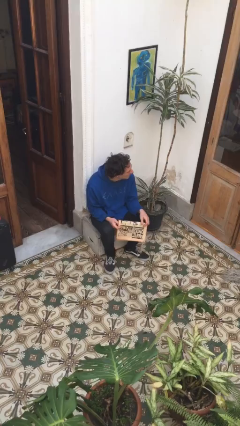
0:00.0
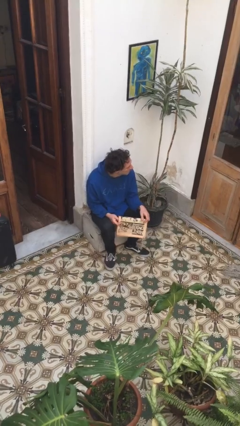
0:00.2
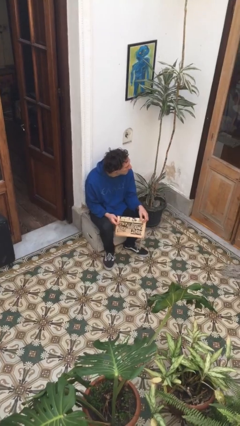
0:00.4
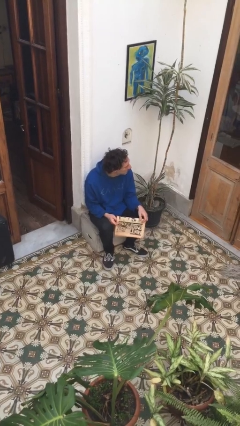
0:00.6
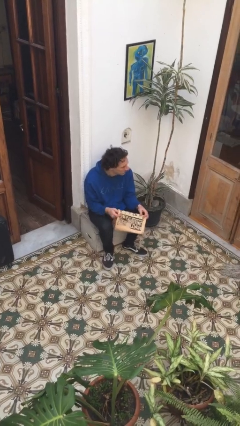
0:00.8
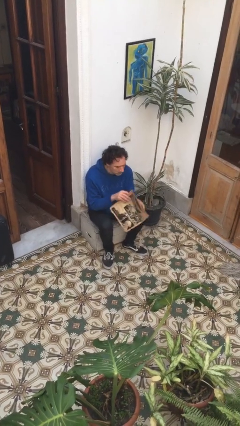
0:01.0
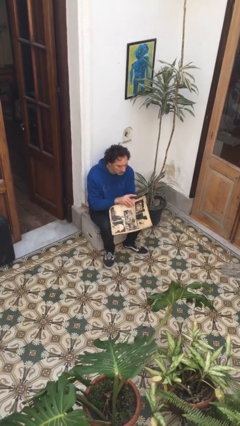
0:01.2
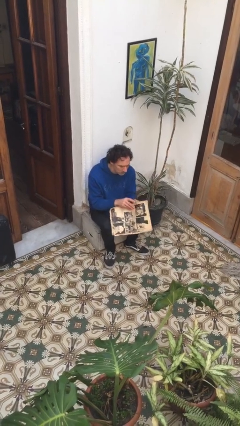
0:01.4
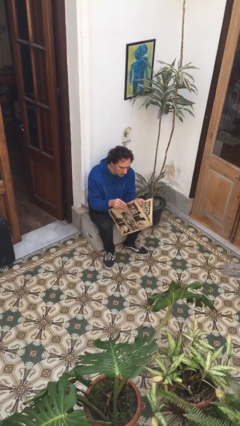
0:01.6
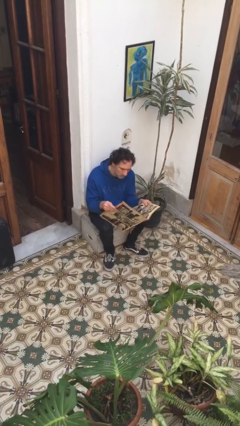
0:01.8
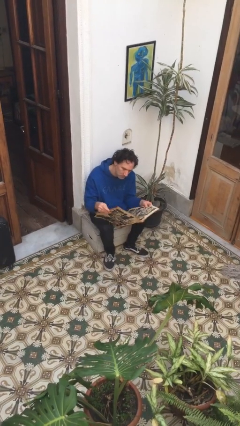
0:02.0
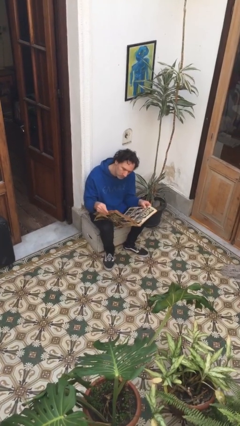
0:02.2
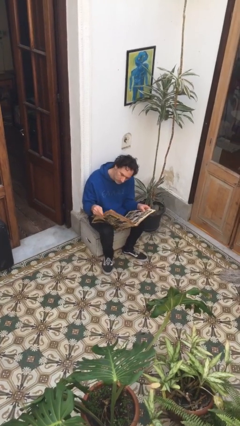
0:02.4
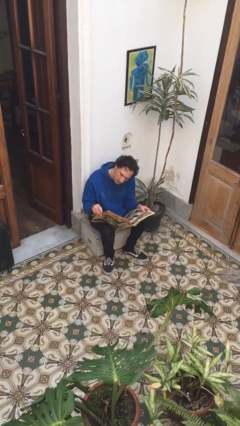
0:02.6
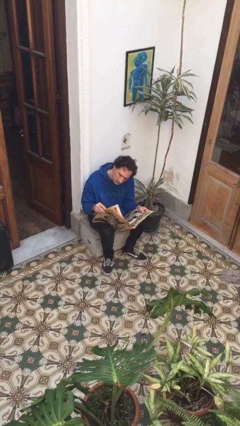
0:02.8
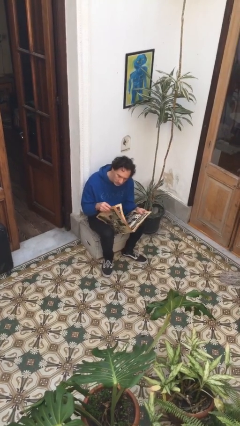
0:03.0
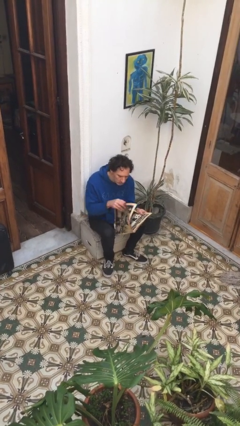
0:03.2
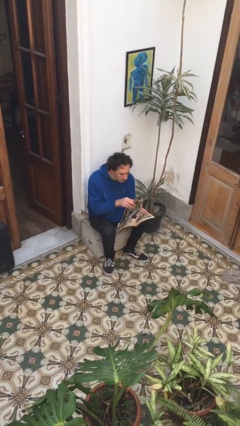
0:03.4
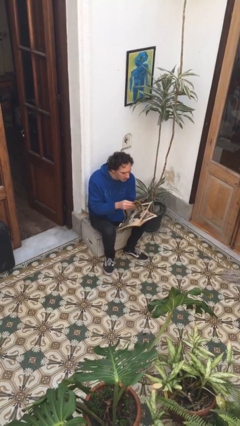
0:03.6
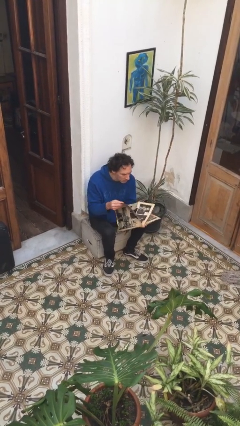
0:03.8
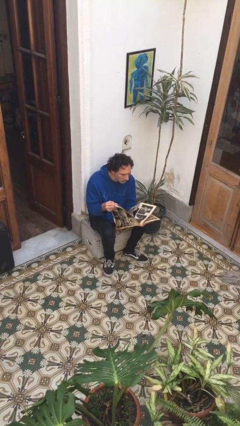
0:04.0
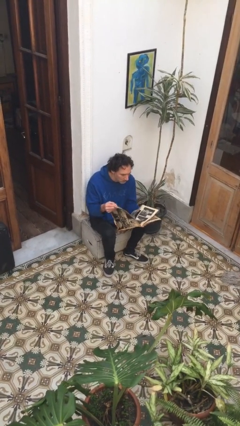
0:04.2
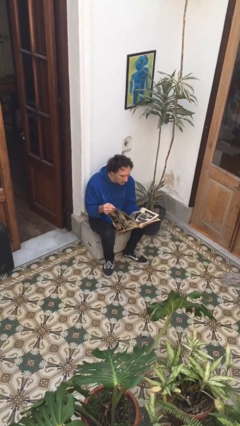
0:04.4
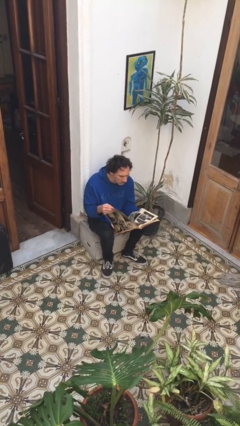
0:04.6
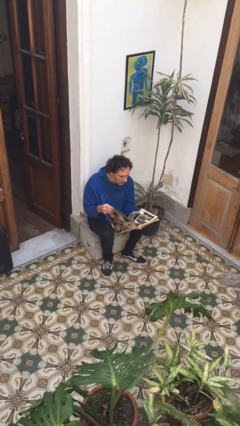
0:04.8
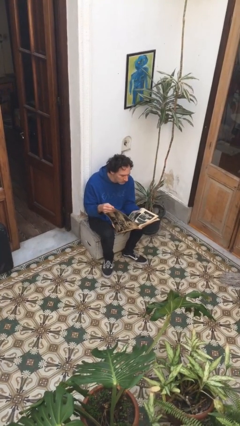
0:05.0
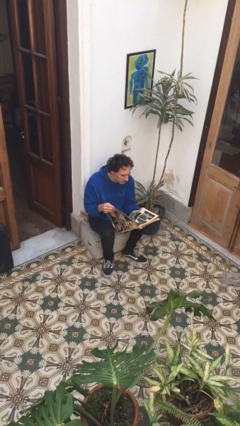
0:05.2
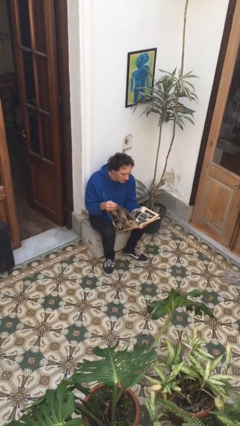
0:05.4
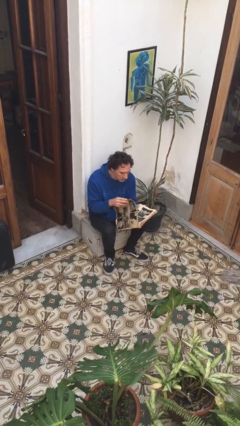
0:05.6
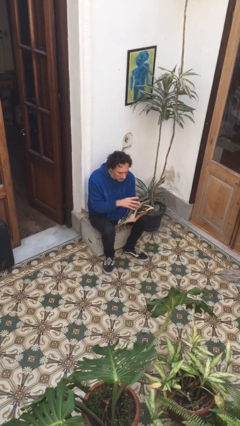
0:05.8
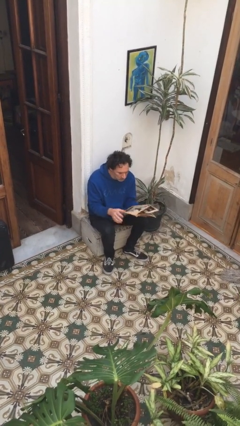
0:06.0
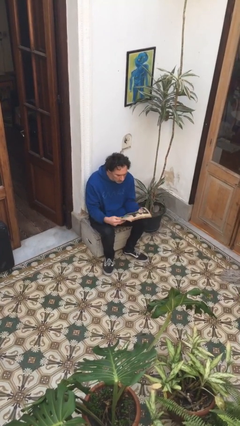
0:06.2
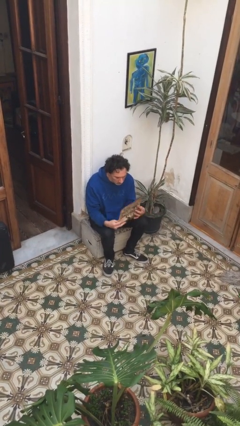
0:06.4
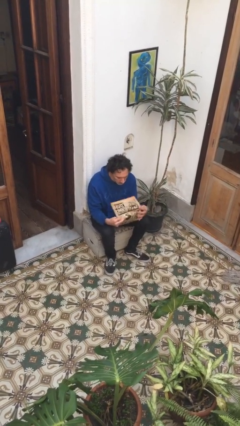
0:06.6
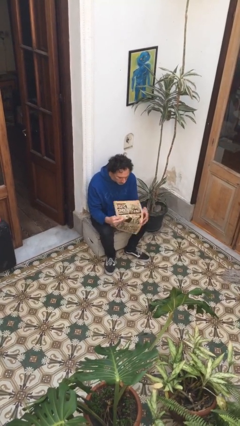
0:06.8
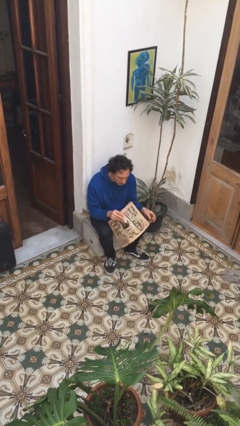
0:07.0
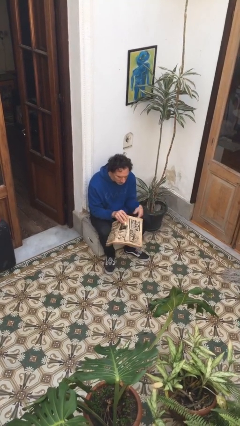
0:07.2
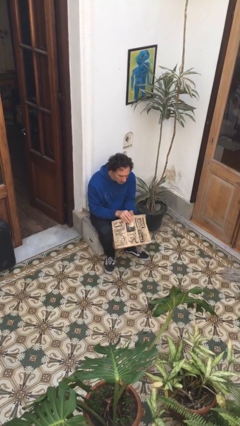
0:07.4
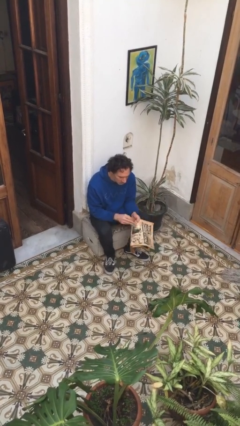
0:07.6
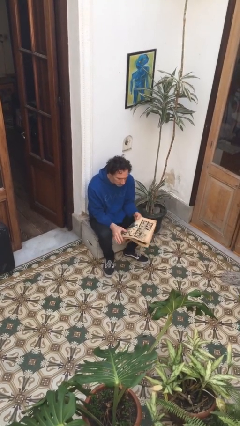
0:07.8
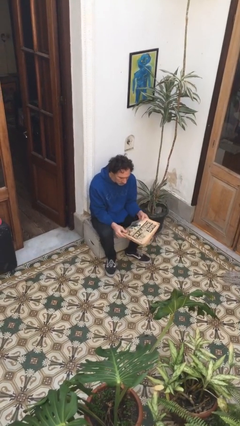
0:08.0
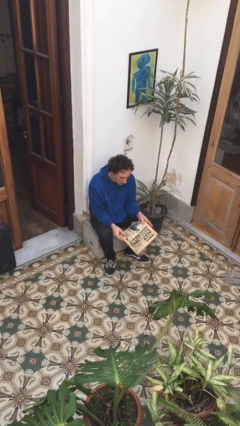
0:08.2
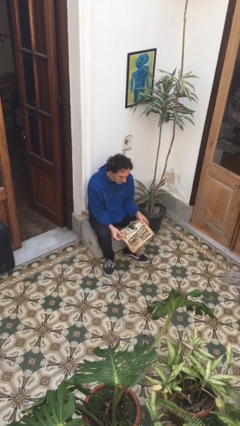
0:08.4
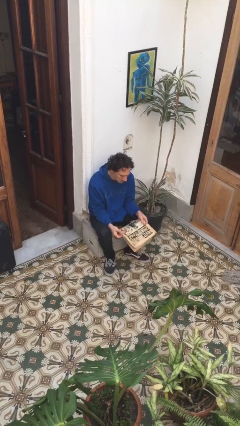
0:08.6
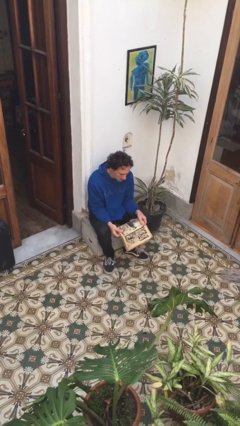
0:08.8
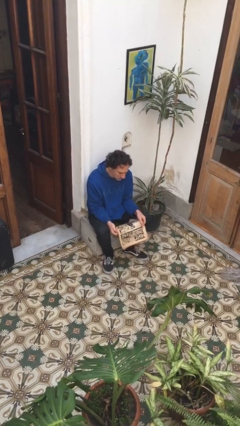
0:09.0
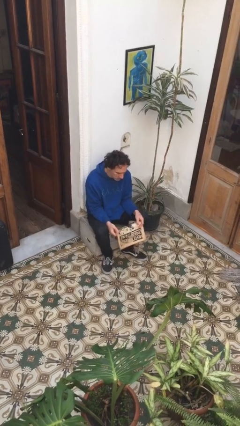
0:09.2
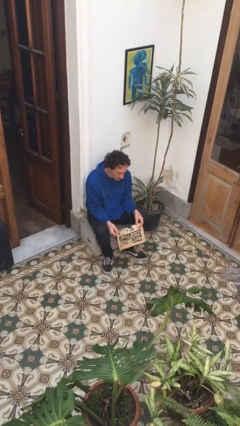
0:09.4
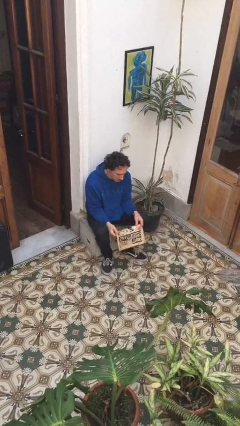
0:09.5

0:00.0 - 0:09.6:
person reads newspaper

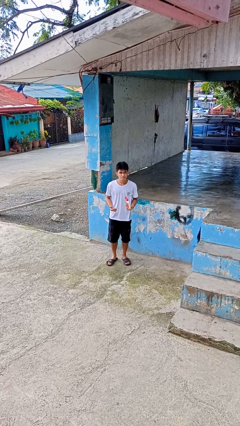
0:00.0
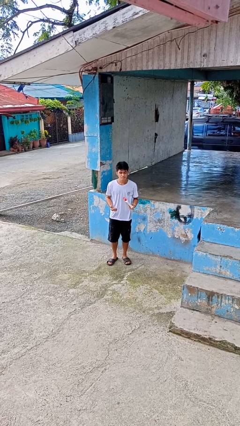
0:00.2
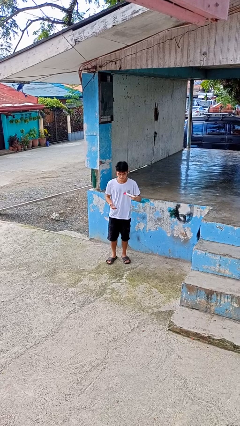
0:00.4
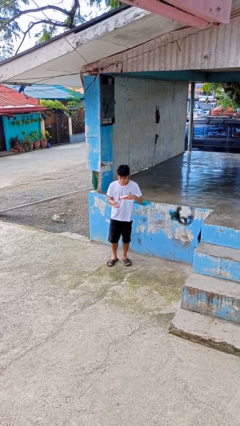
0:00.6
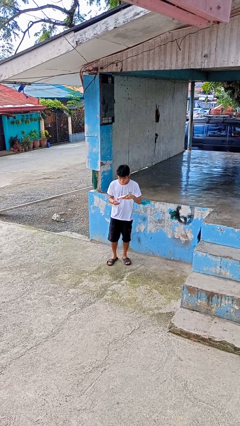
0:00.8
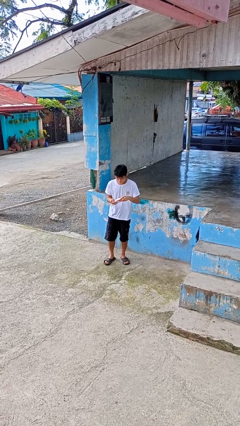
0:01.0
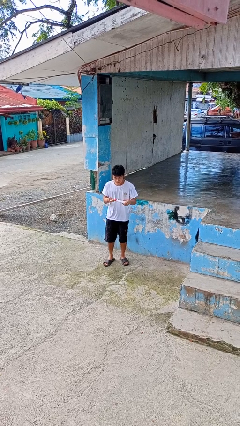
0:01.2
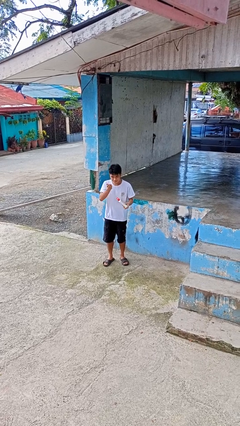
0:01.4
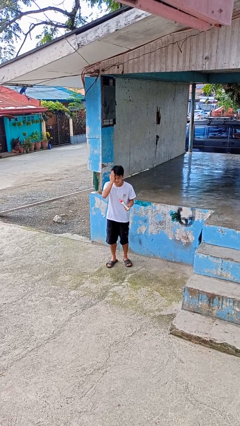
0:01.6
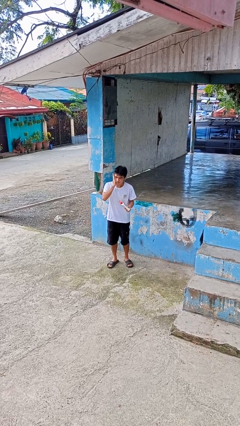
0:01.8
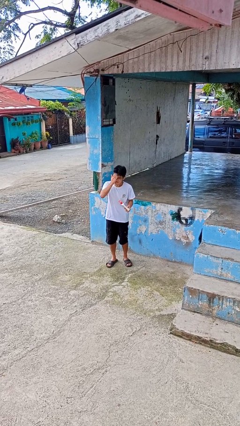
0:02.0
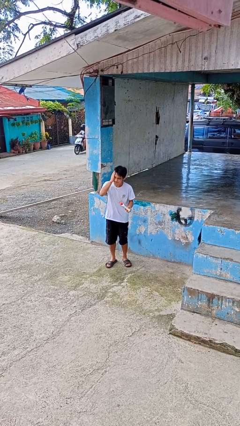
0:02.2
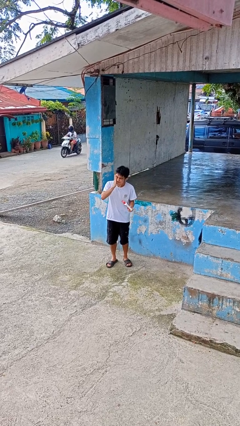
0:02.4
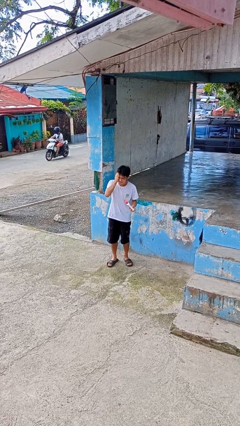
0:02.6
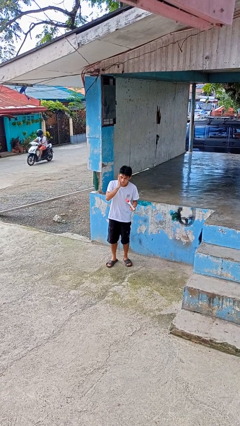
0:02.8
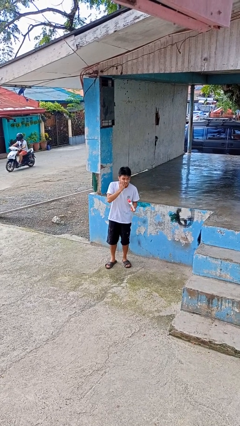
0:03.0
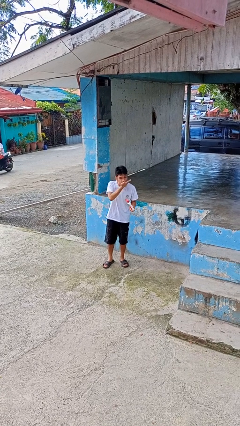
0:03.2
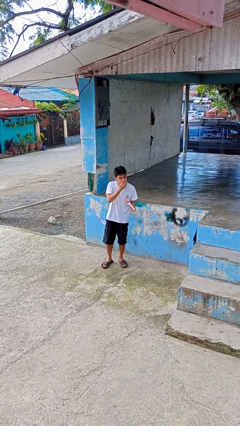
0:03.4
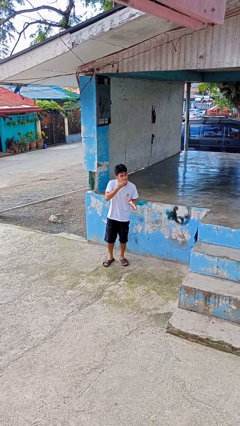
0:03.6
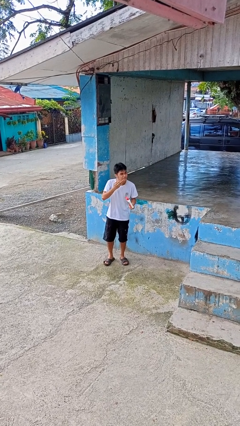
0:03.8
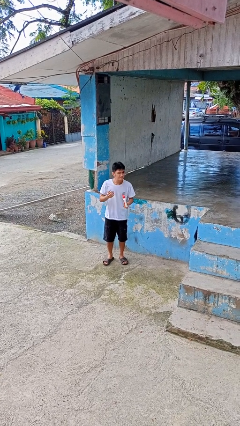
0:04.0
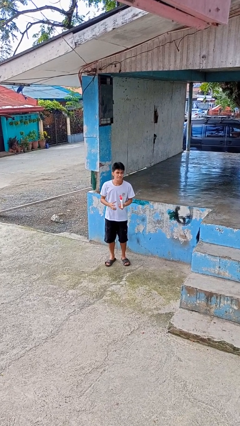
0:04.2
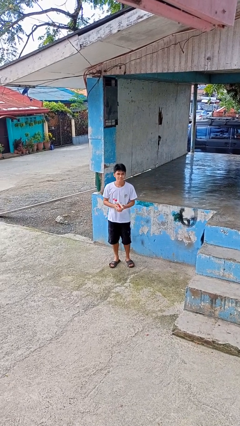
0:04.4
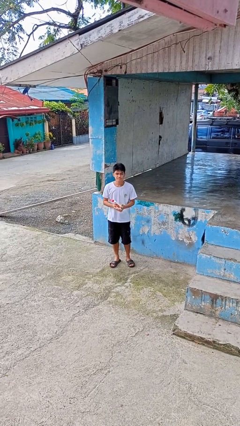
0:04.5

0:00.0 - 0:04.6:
person applies facial moisturizer

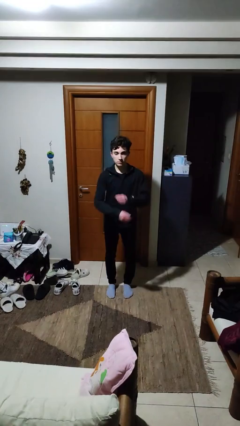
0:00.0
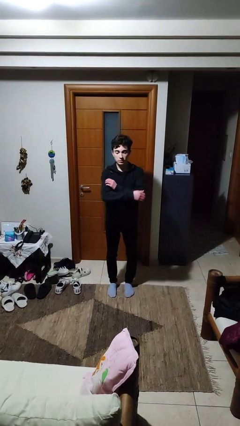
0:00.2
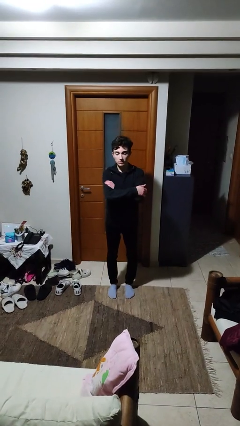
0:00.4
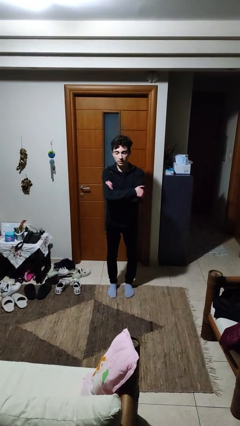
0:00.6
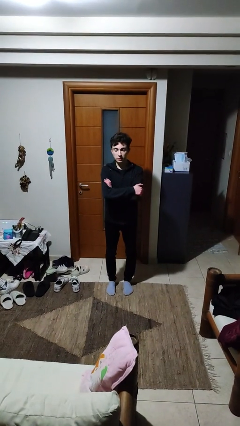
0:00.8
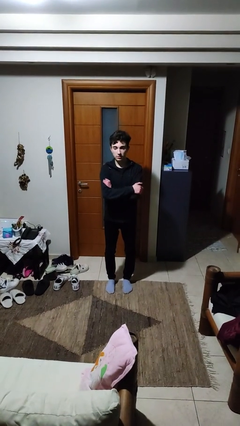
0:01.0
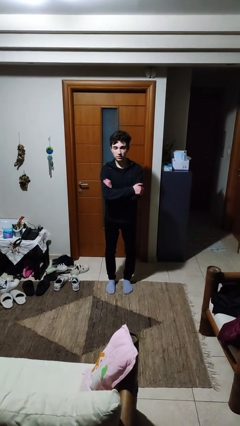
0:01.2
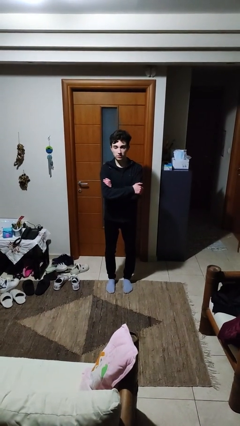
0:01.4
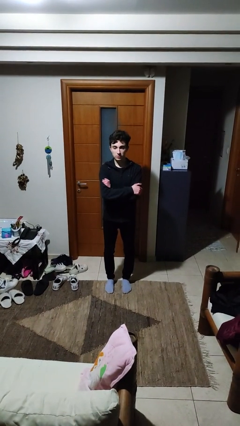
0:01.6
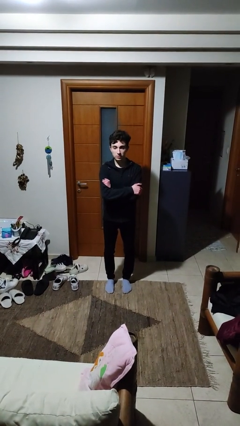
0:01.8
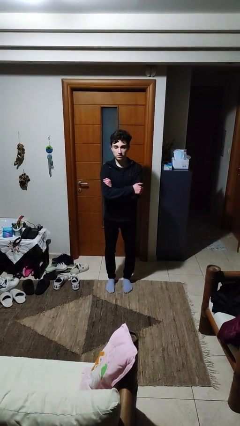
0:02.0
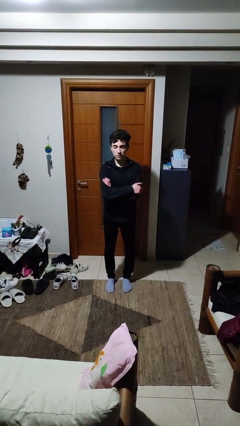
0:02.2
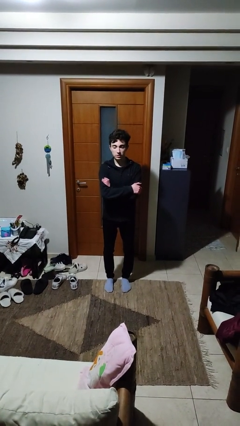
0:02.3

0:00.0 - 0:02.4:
person crosses arms

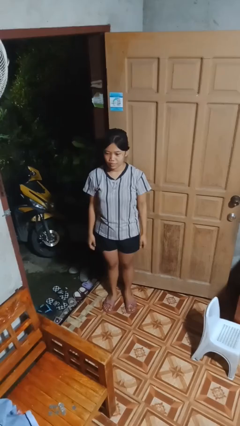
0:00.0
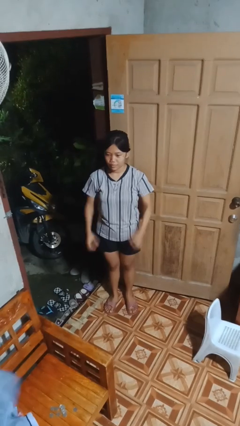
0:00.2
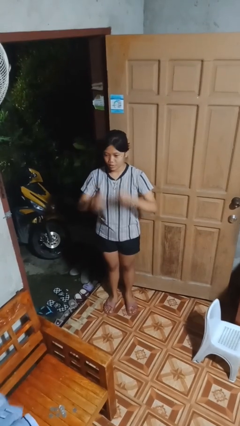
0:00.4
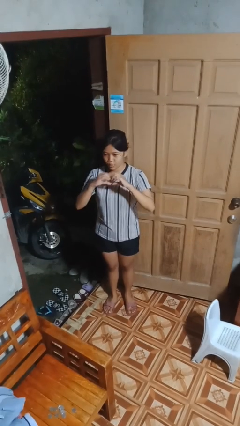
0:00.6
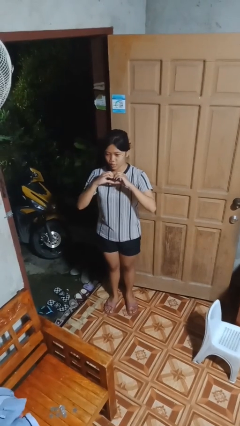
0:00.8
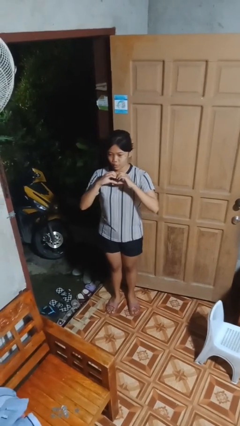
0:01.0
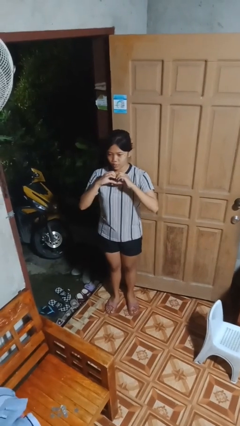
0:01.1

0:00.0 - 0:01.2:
person gestures heart
